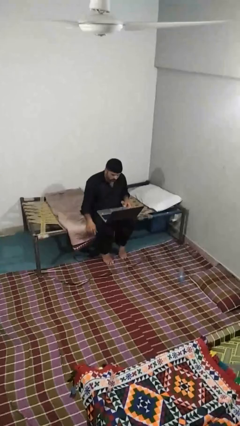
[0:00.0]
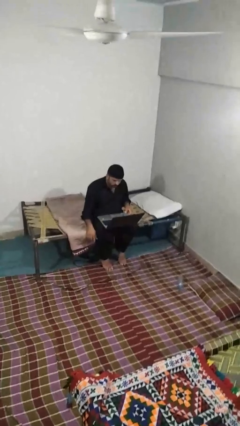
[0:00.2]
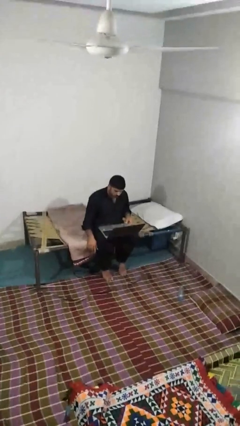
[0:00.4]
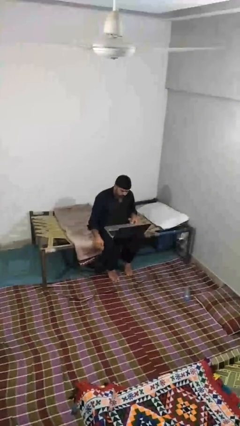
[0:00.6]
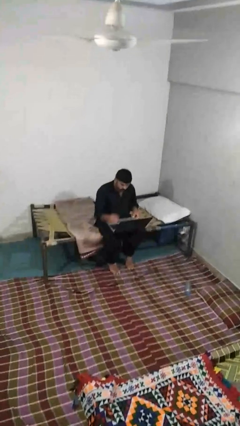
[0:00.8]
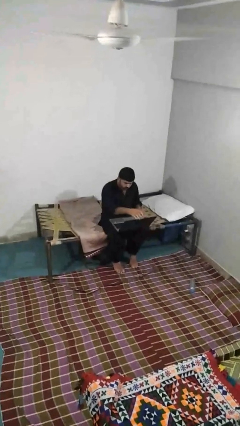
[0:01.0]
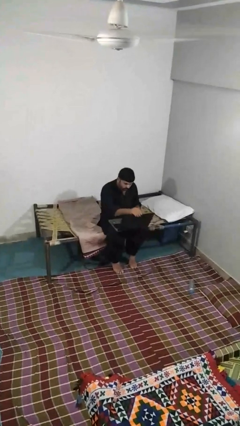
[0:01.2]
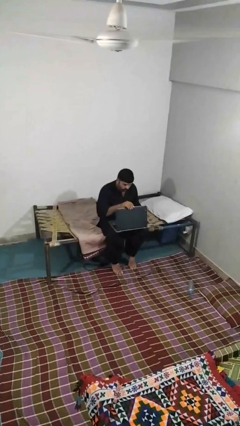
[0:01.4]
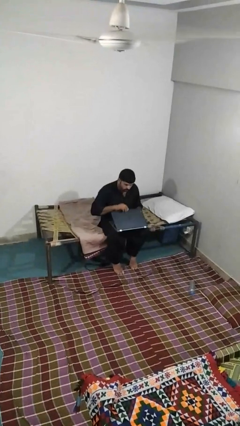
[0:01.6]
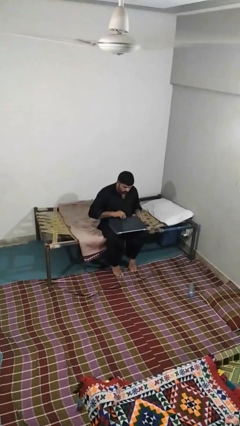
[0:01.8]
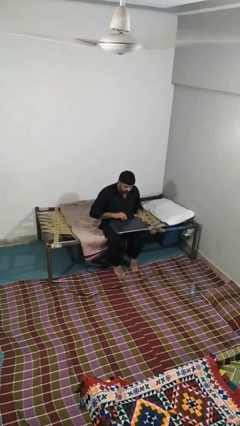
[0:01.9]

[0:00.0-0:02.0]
person closes laptop

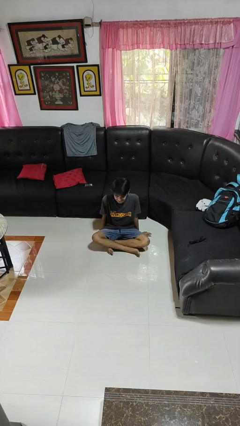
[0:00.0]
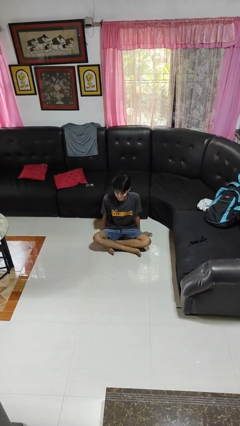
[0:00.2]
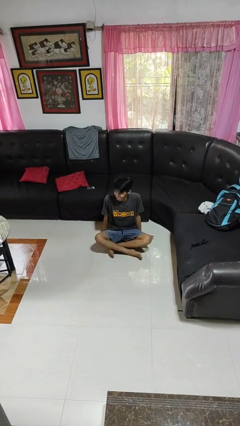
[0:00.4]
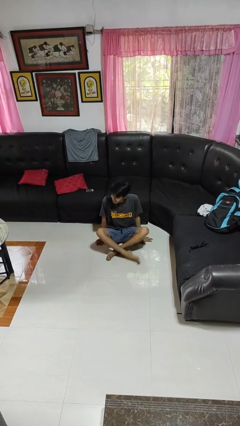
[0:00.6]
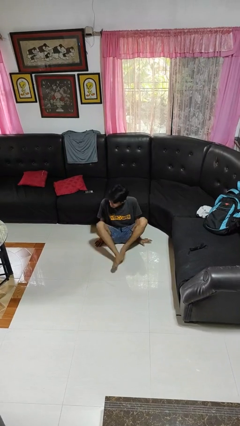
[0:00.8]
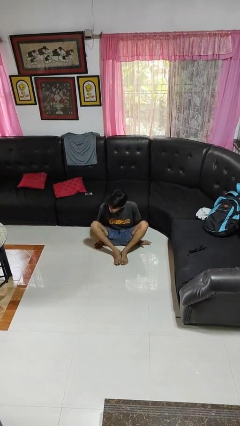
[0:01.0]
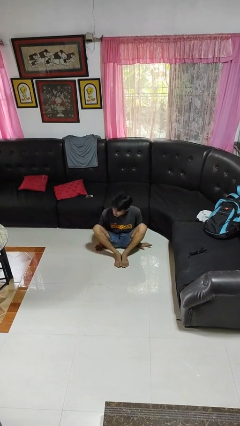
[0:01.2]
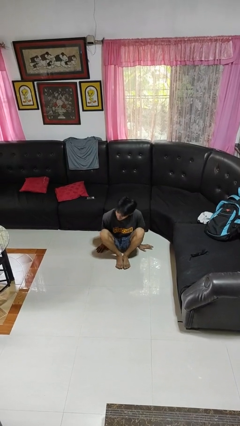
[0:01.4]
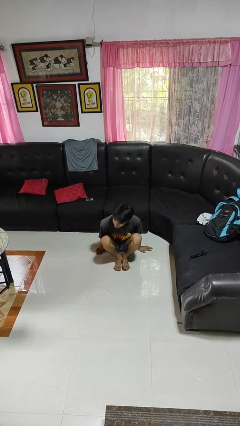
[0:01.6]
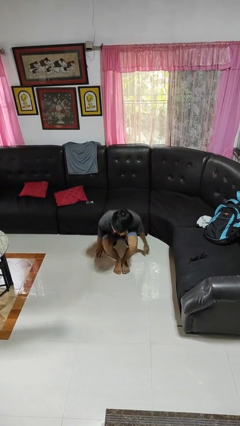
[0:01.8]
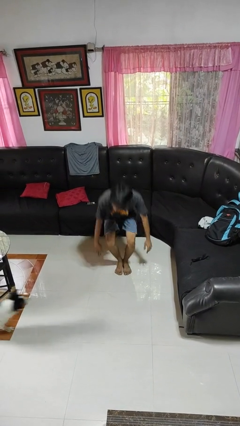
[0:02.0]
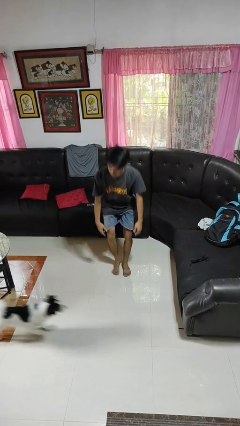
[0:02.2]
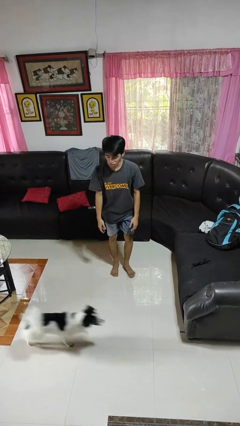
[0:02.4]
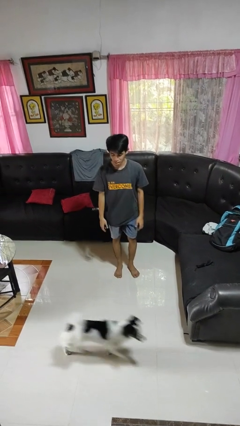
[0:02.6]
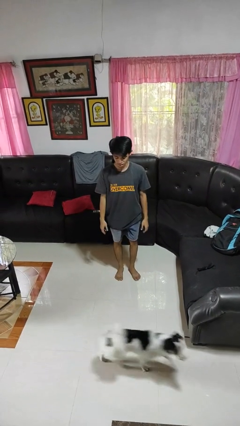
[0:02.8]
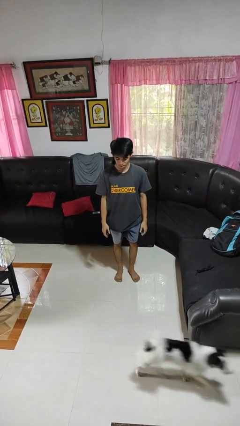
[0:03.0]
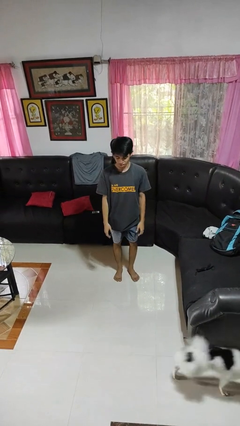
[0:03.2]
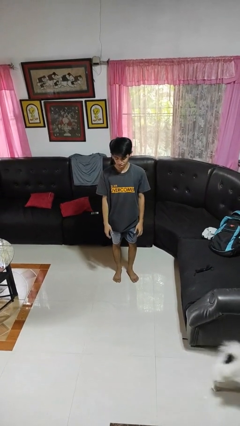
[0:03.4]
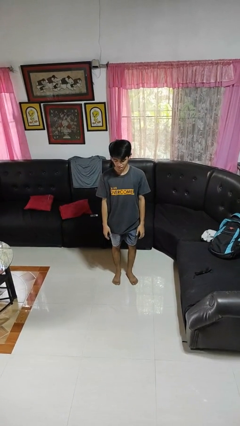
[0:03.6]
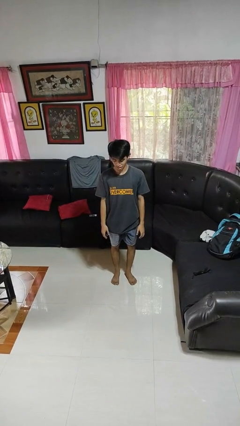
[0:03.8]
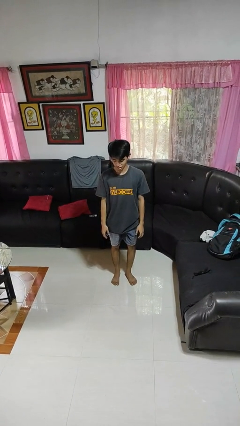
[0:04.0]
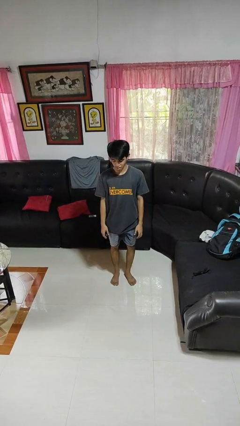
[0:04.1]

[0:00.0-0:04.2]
person stands up from floor

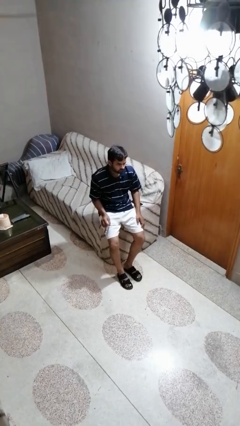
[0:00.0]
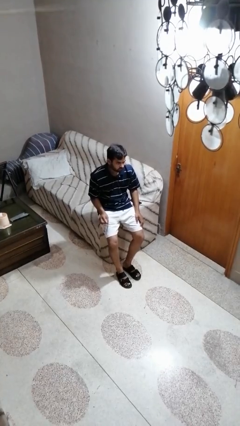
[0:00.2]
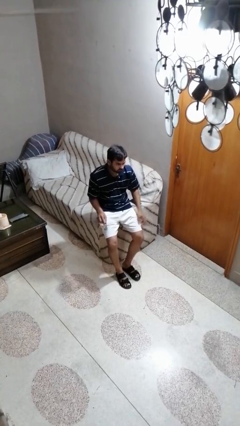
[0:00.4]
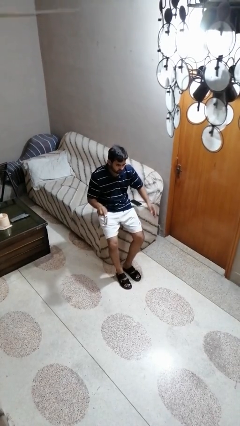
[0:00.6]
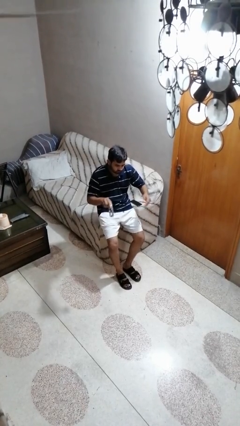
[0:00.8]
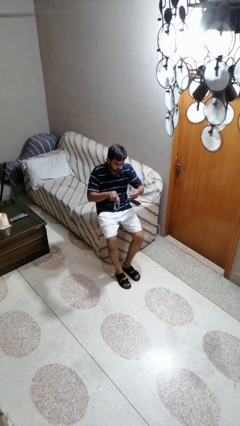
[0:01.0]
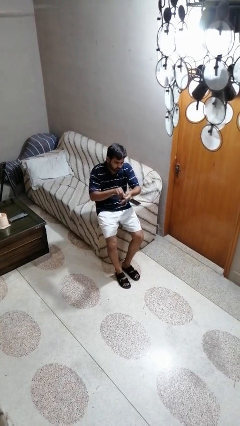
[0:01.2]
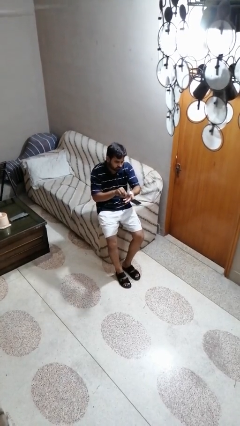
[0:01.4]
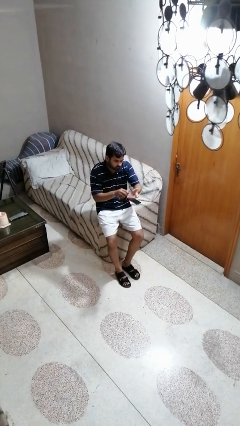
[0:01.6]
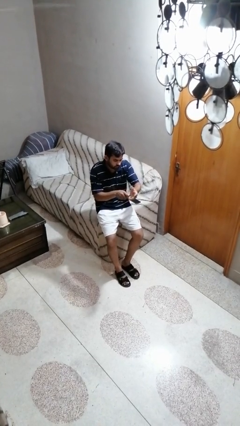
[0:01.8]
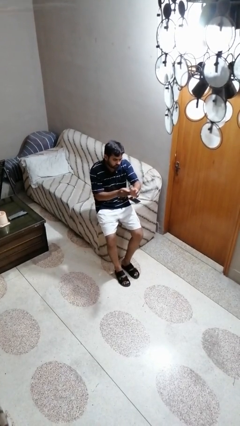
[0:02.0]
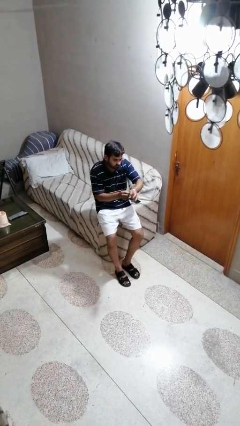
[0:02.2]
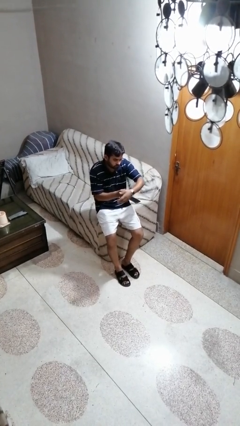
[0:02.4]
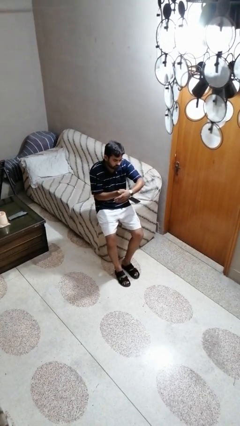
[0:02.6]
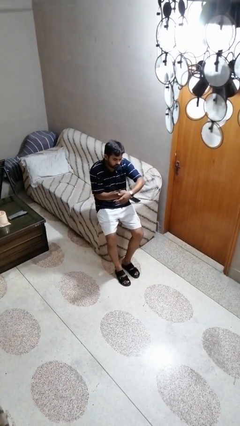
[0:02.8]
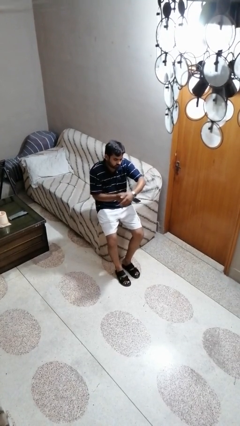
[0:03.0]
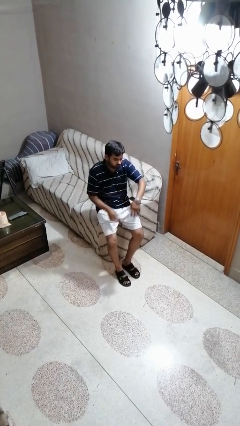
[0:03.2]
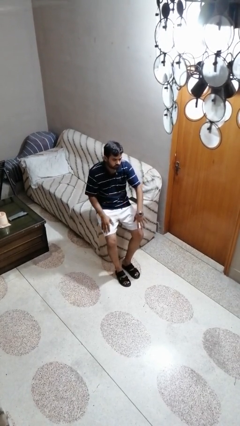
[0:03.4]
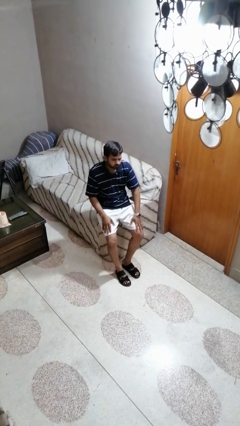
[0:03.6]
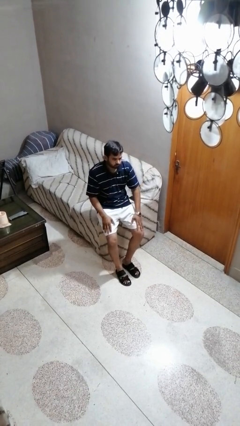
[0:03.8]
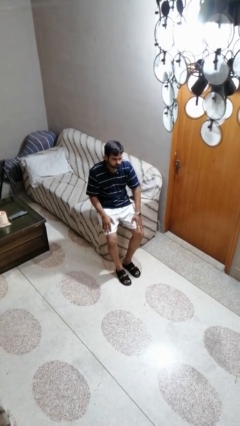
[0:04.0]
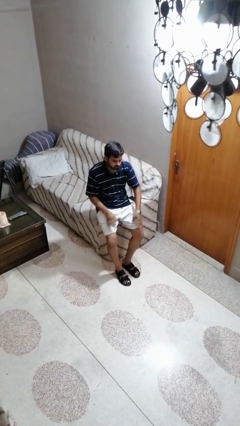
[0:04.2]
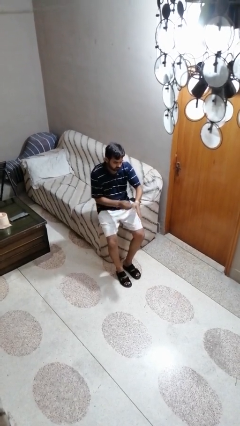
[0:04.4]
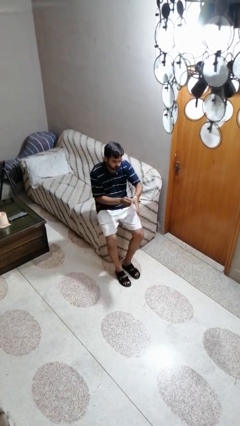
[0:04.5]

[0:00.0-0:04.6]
person puts on wristwatch

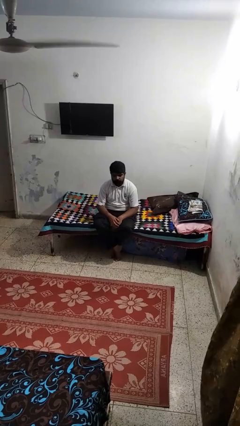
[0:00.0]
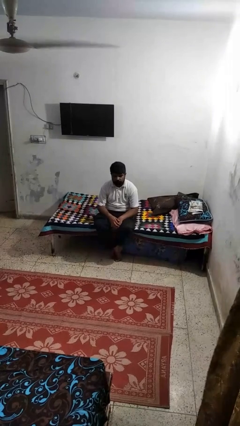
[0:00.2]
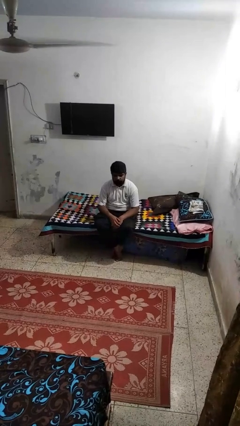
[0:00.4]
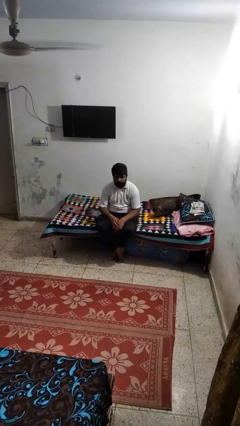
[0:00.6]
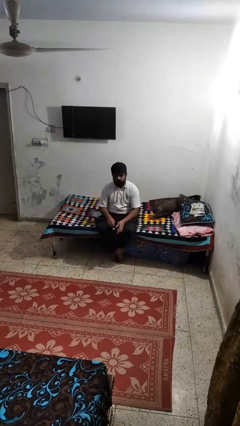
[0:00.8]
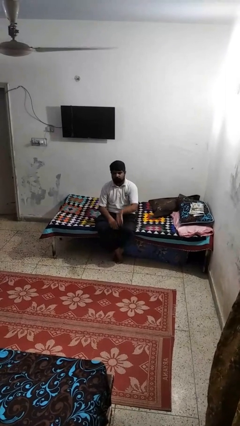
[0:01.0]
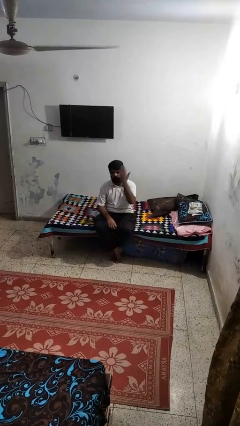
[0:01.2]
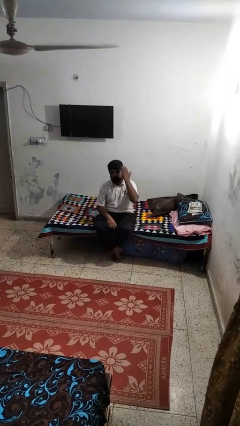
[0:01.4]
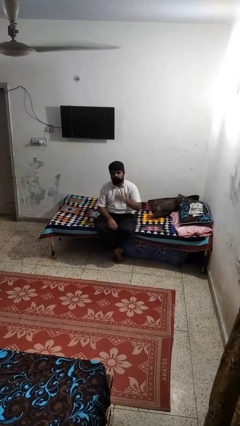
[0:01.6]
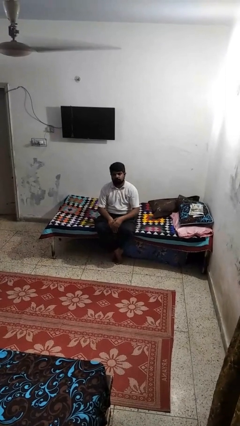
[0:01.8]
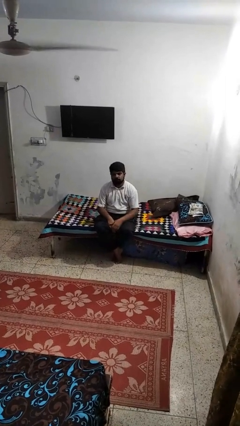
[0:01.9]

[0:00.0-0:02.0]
person gestures swipe up

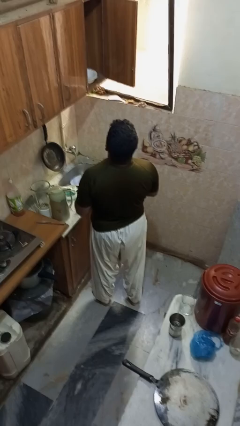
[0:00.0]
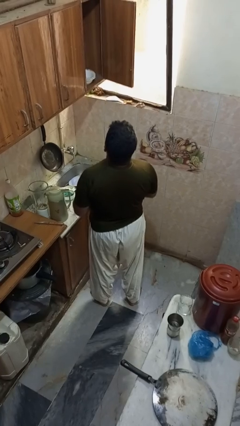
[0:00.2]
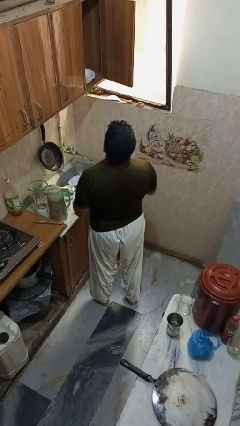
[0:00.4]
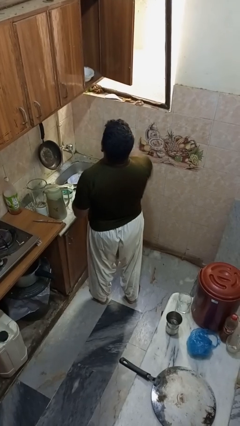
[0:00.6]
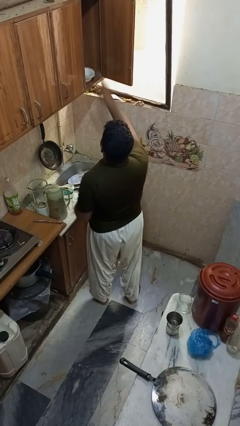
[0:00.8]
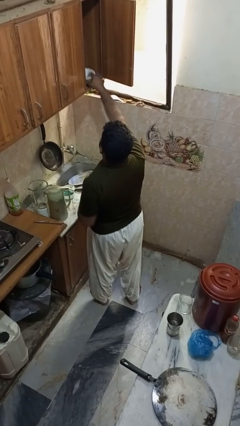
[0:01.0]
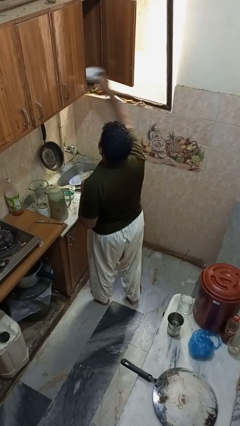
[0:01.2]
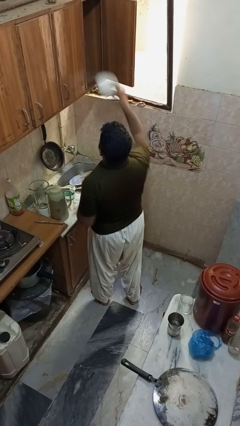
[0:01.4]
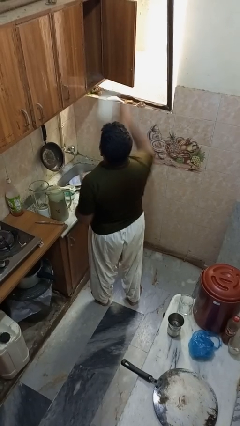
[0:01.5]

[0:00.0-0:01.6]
person takes object from cabinet

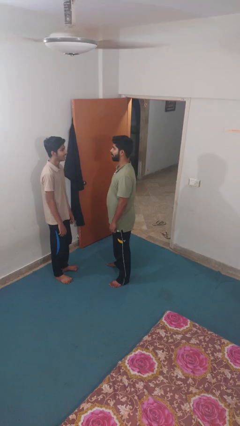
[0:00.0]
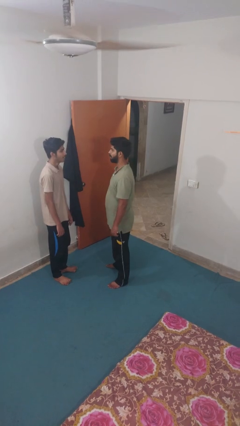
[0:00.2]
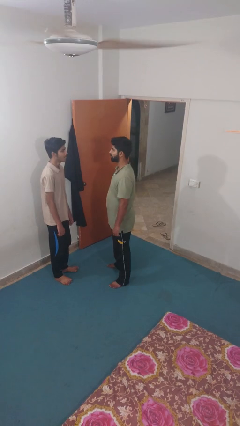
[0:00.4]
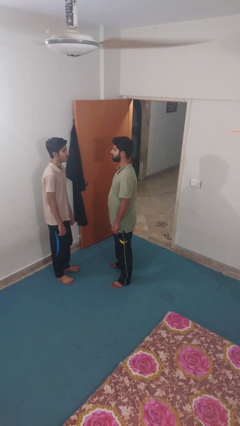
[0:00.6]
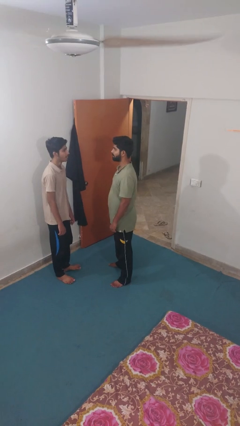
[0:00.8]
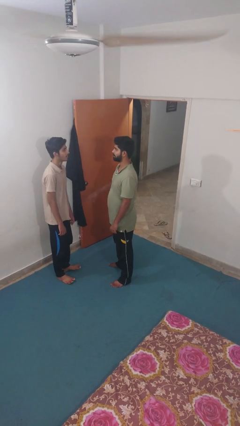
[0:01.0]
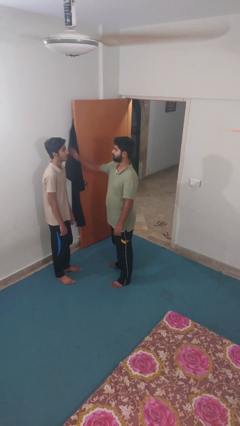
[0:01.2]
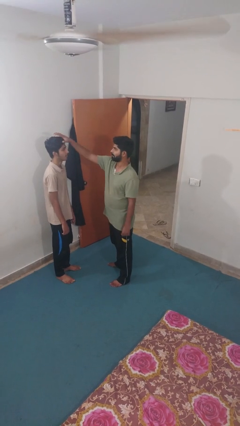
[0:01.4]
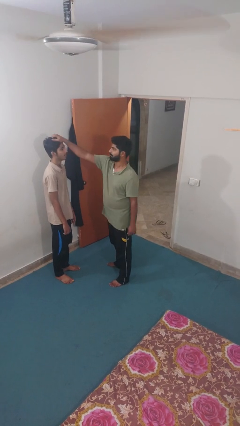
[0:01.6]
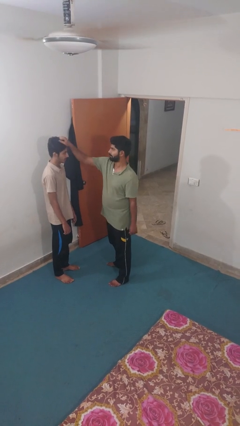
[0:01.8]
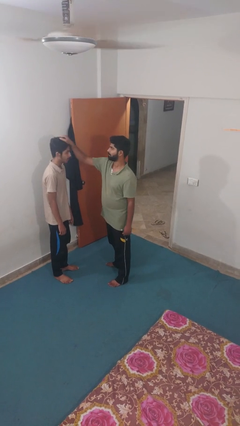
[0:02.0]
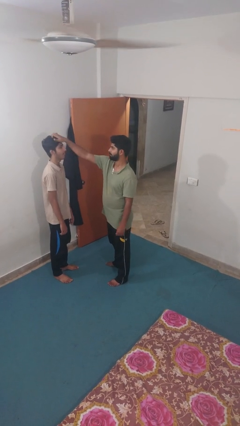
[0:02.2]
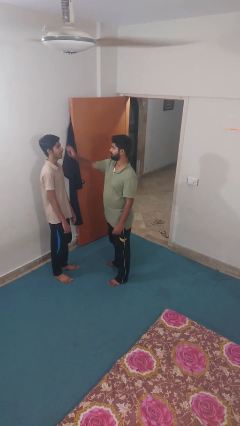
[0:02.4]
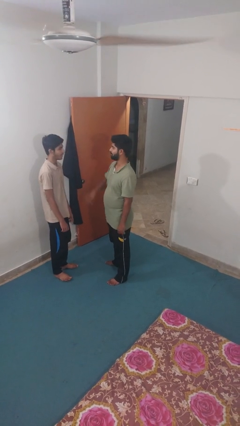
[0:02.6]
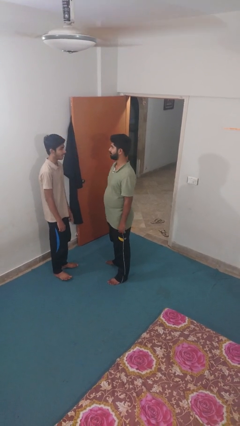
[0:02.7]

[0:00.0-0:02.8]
person grabs person by hair
